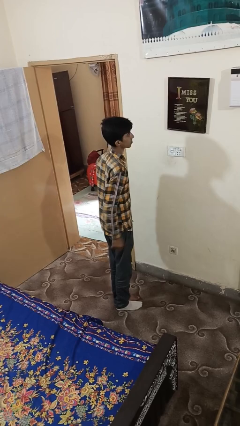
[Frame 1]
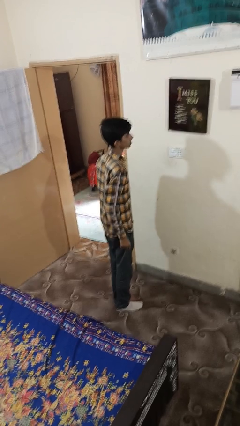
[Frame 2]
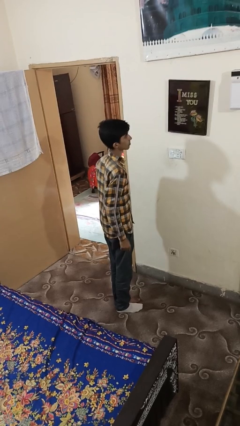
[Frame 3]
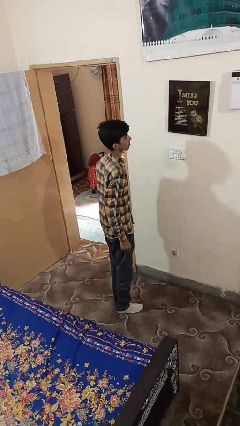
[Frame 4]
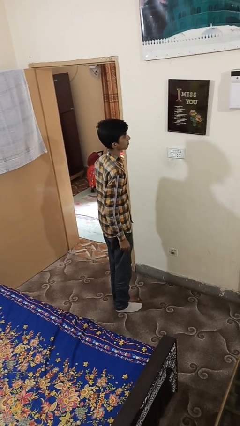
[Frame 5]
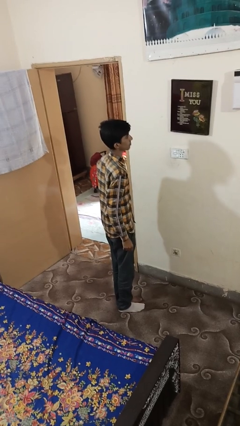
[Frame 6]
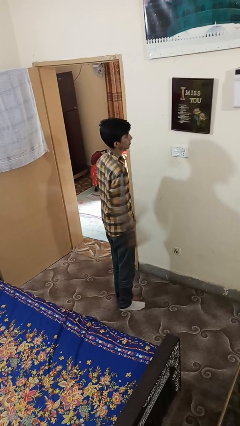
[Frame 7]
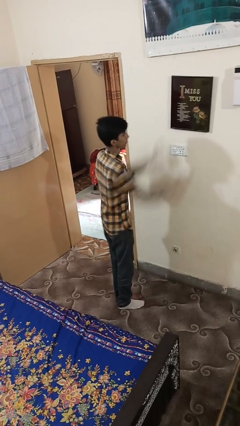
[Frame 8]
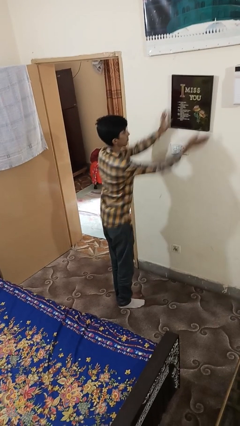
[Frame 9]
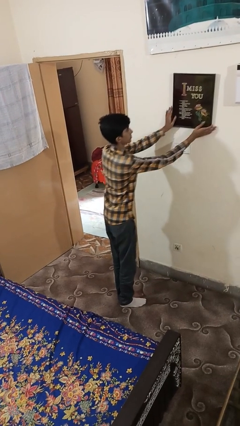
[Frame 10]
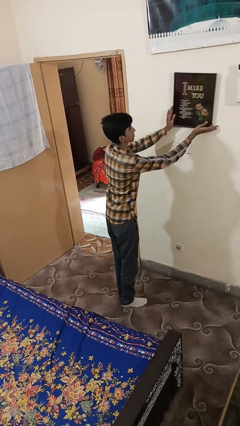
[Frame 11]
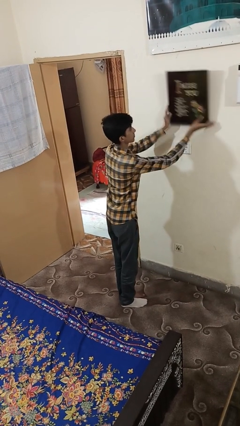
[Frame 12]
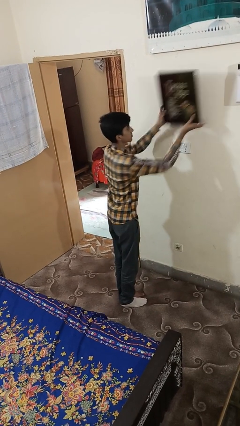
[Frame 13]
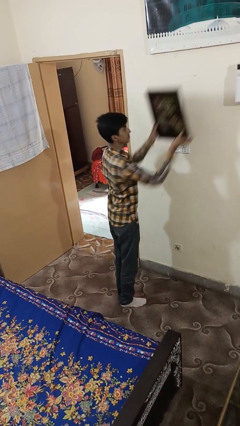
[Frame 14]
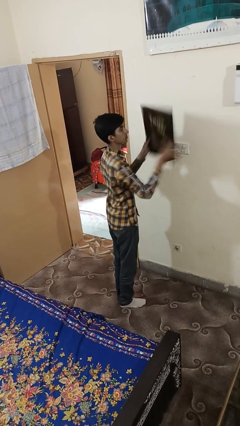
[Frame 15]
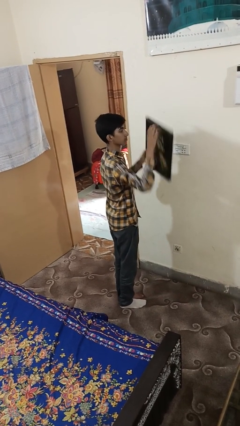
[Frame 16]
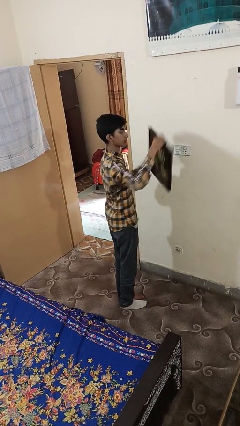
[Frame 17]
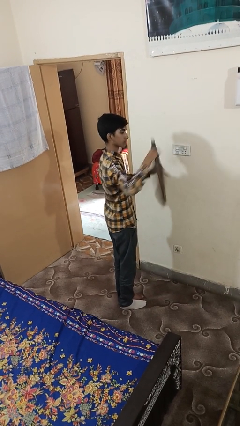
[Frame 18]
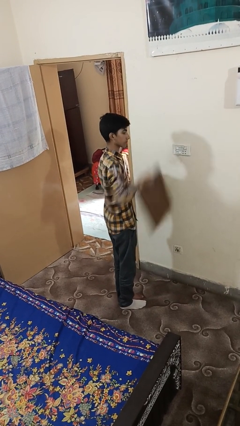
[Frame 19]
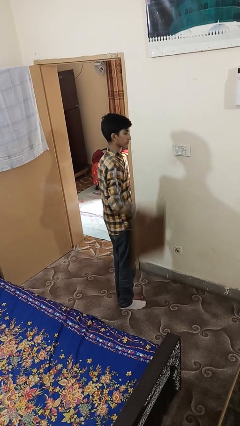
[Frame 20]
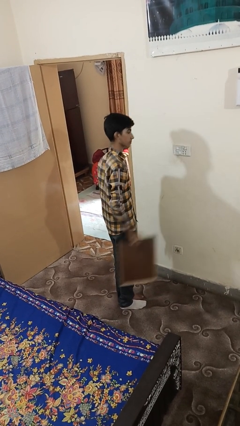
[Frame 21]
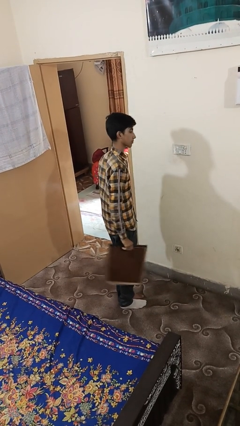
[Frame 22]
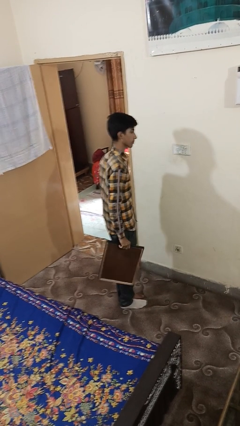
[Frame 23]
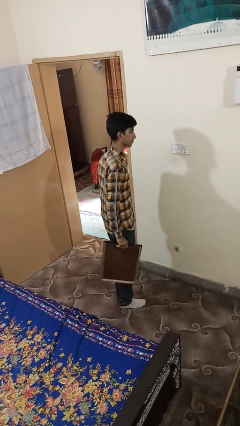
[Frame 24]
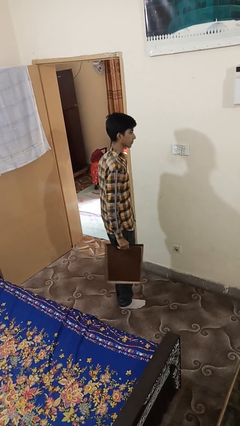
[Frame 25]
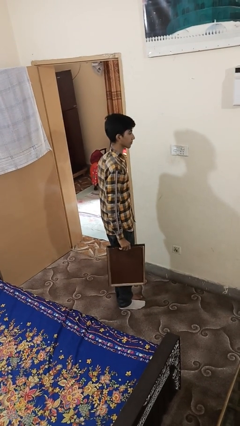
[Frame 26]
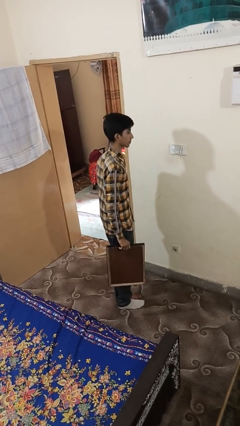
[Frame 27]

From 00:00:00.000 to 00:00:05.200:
person takes down picture frame

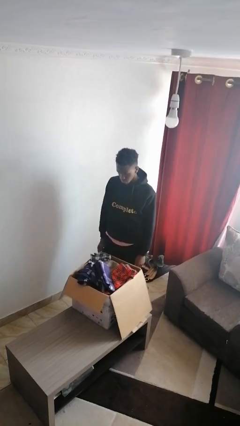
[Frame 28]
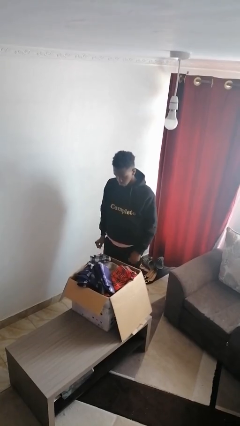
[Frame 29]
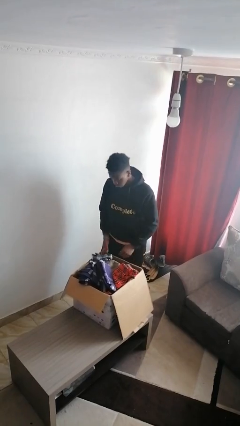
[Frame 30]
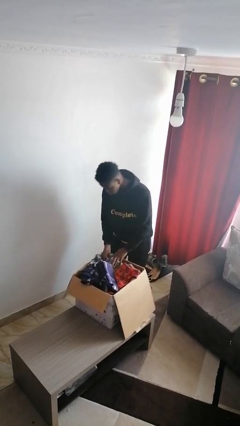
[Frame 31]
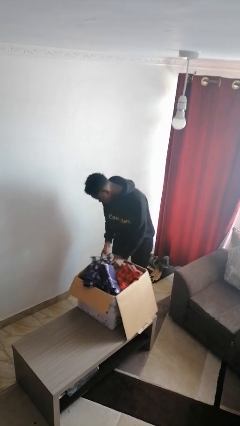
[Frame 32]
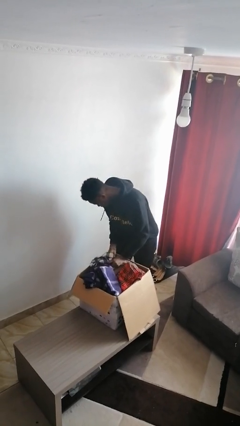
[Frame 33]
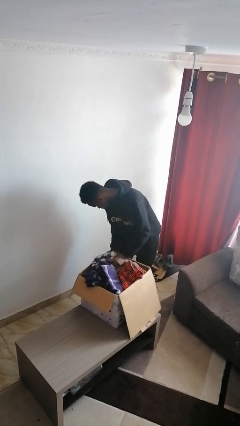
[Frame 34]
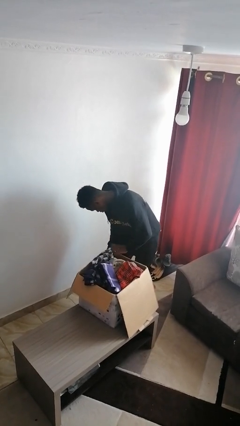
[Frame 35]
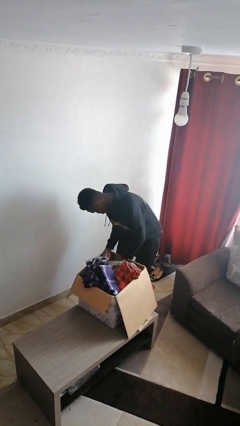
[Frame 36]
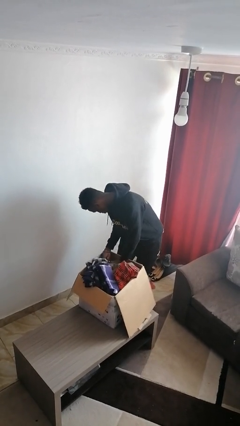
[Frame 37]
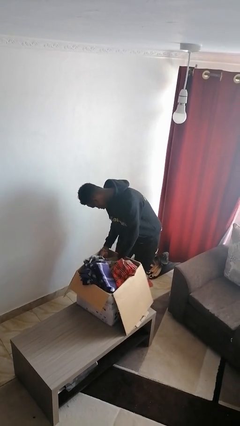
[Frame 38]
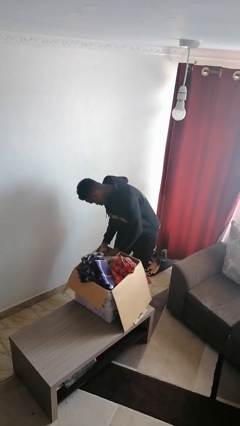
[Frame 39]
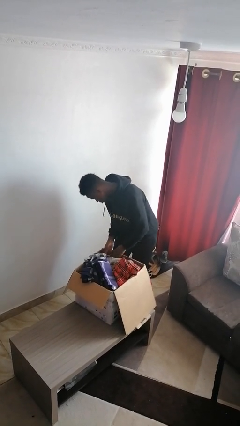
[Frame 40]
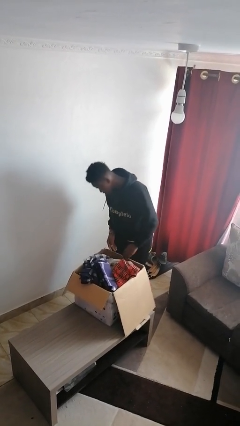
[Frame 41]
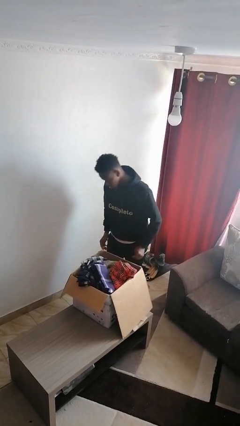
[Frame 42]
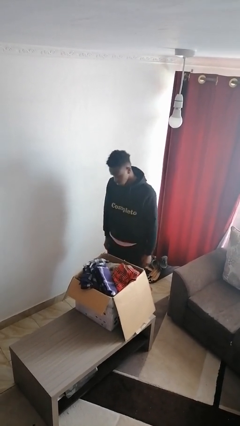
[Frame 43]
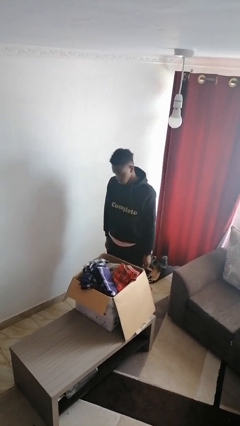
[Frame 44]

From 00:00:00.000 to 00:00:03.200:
person searches in box

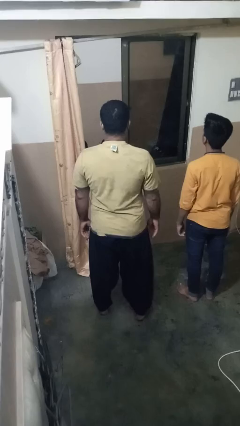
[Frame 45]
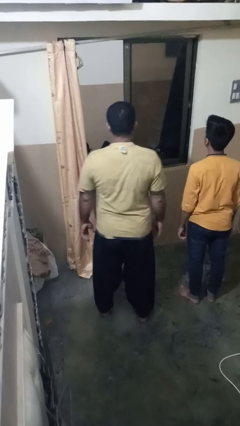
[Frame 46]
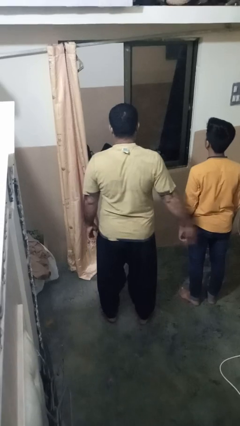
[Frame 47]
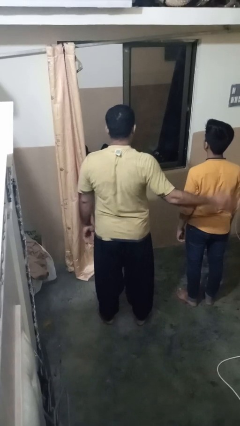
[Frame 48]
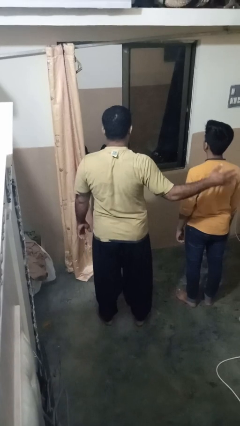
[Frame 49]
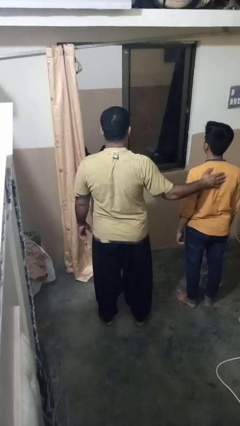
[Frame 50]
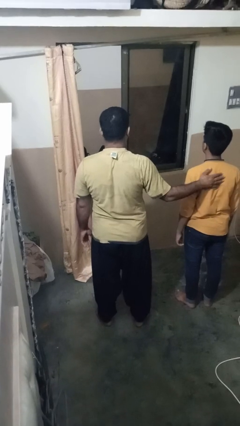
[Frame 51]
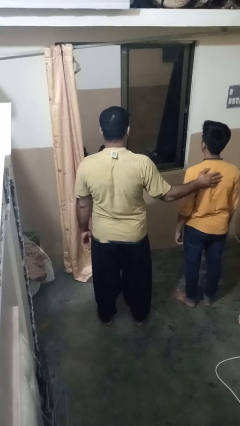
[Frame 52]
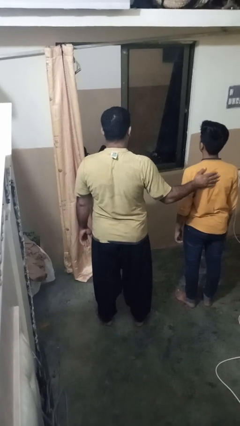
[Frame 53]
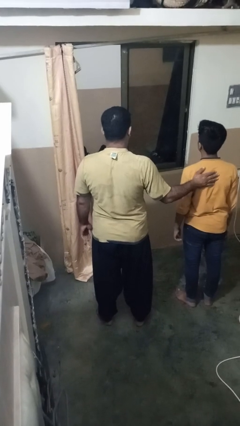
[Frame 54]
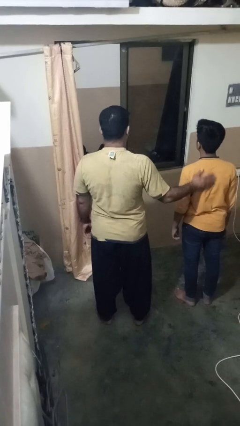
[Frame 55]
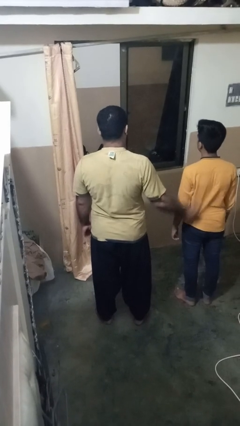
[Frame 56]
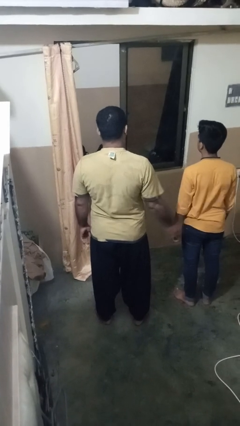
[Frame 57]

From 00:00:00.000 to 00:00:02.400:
person touches back of person

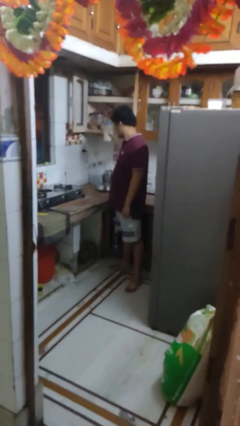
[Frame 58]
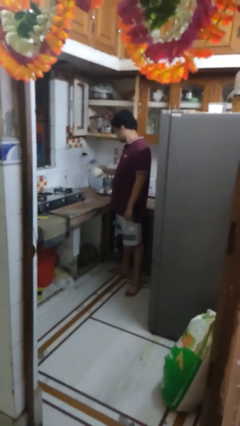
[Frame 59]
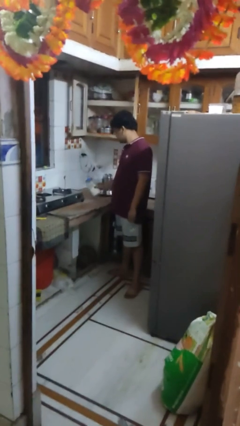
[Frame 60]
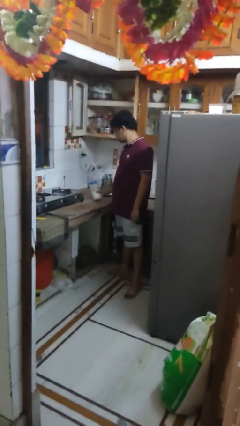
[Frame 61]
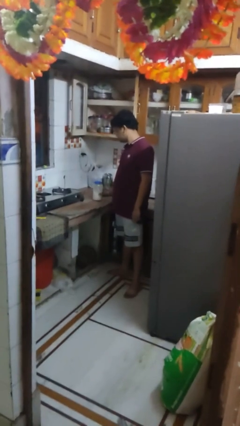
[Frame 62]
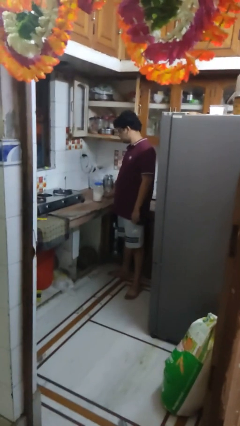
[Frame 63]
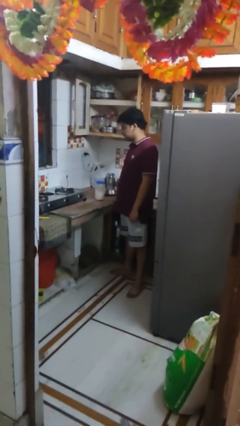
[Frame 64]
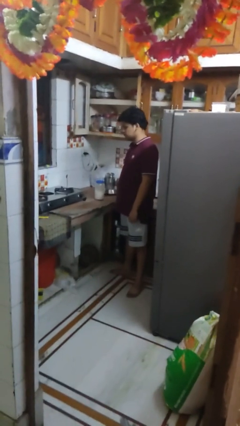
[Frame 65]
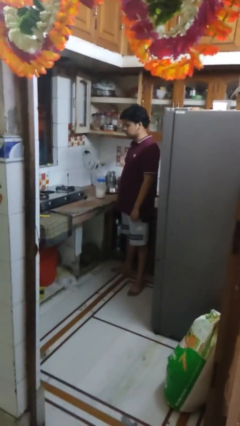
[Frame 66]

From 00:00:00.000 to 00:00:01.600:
person takes object from cabinet

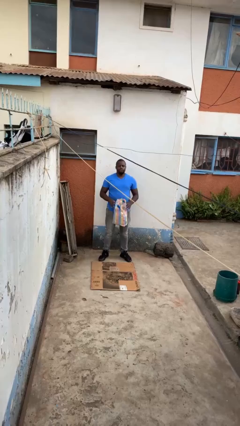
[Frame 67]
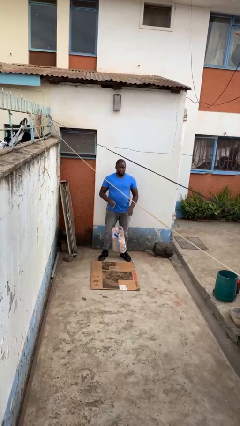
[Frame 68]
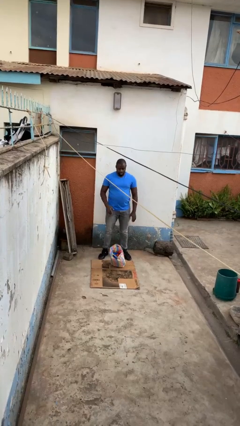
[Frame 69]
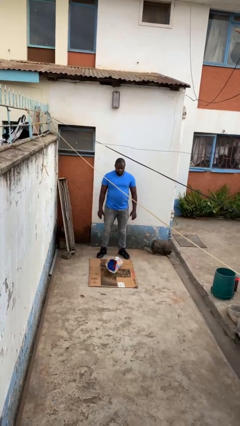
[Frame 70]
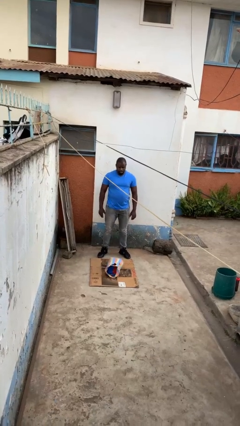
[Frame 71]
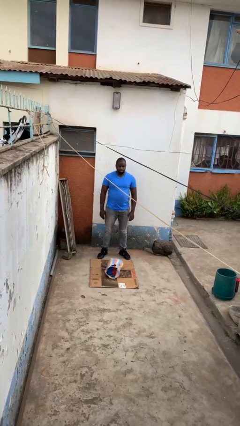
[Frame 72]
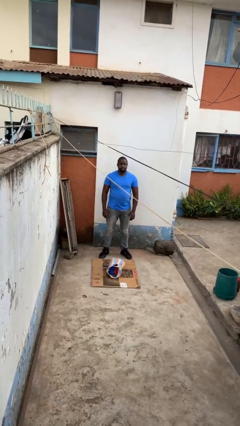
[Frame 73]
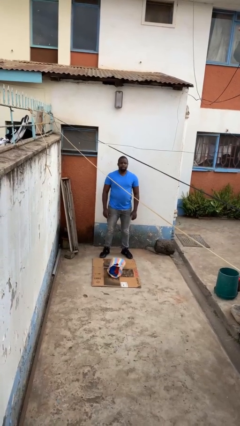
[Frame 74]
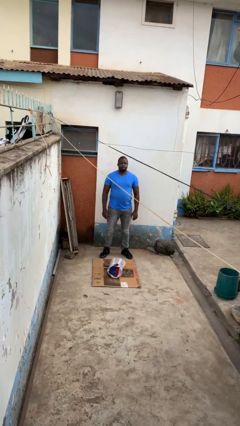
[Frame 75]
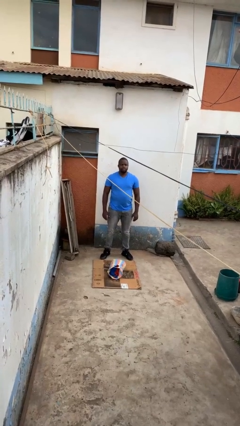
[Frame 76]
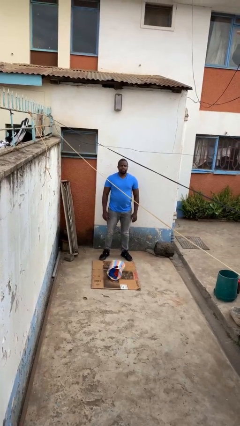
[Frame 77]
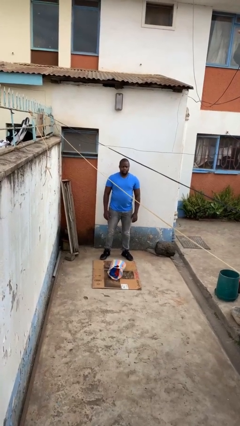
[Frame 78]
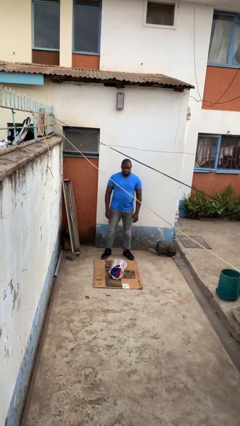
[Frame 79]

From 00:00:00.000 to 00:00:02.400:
person drops object

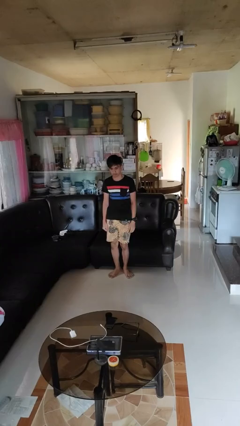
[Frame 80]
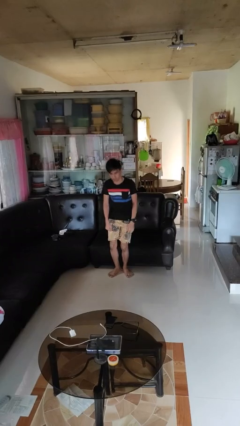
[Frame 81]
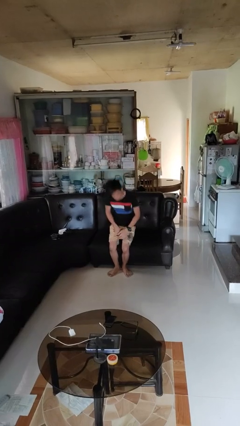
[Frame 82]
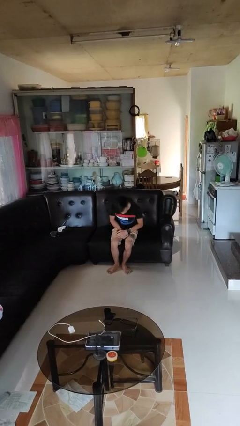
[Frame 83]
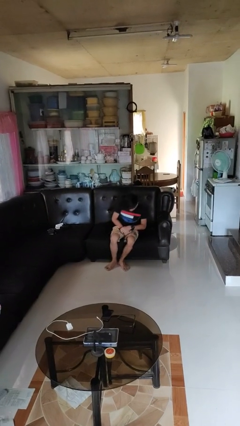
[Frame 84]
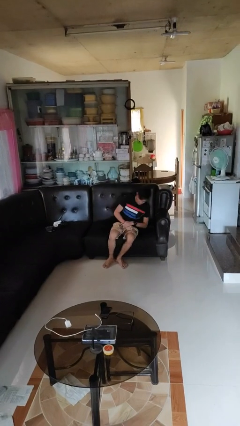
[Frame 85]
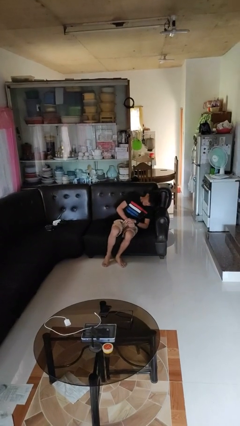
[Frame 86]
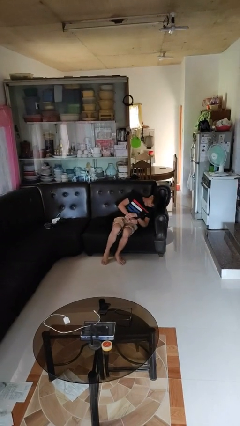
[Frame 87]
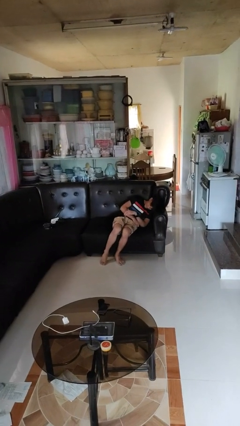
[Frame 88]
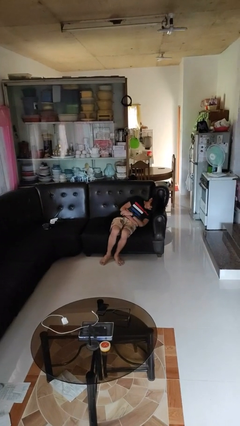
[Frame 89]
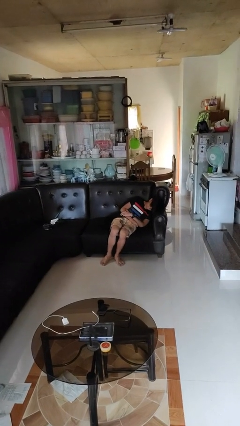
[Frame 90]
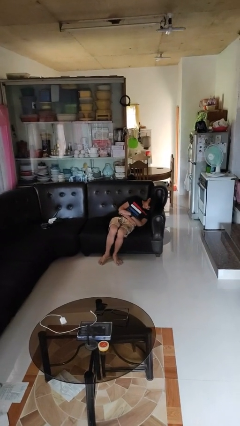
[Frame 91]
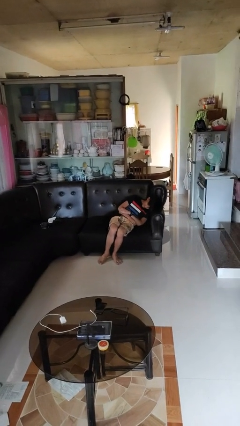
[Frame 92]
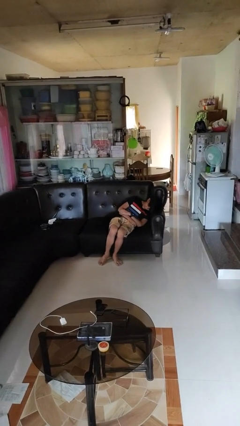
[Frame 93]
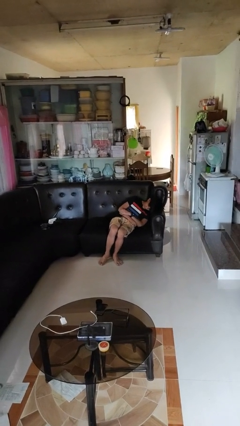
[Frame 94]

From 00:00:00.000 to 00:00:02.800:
person lies down on couch
